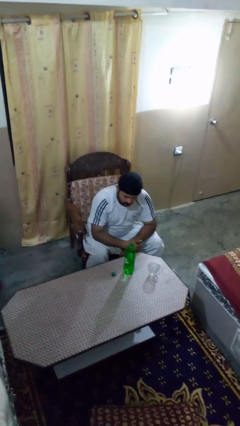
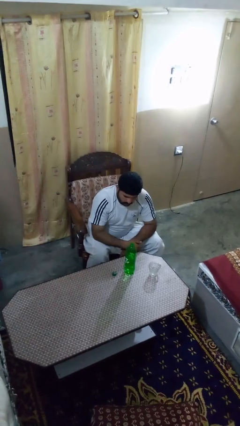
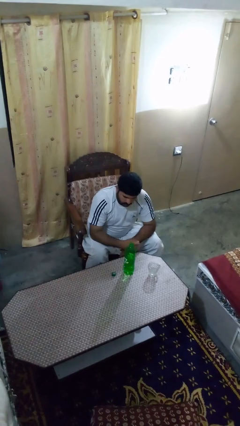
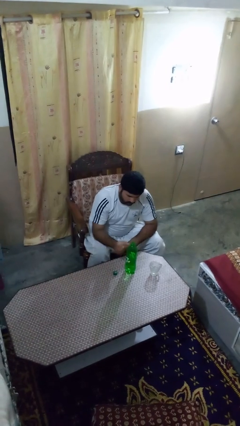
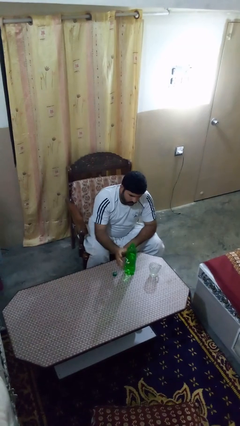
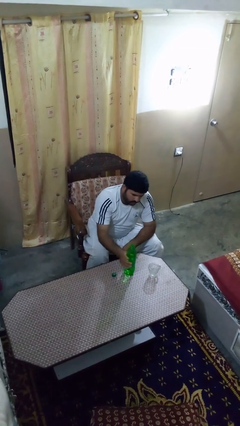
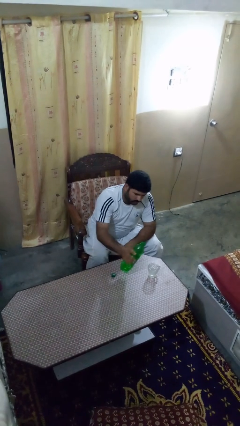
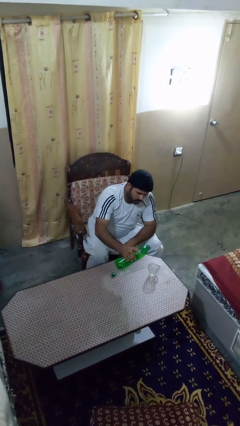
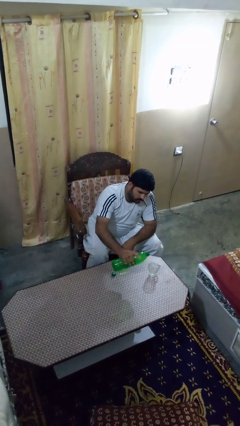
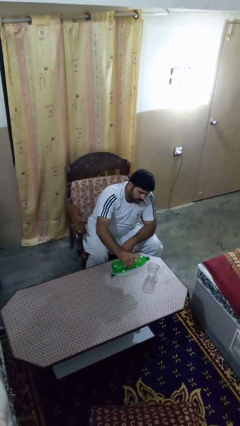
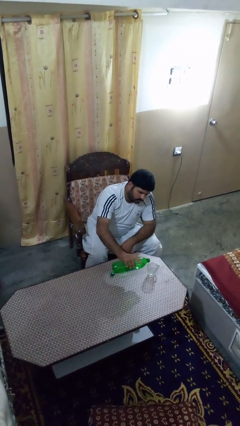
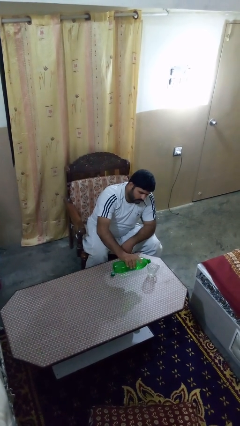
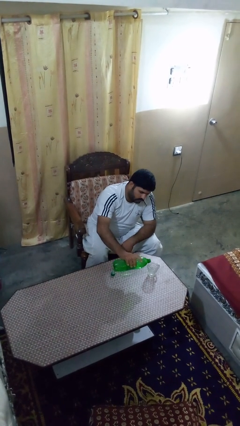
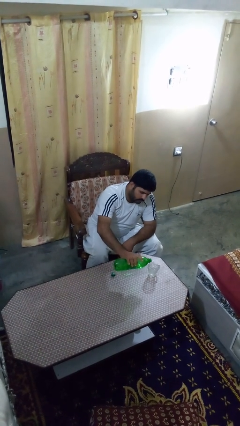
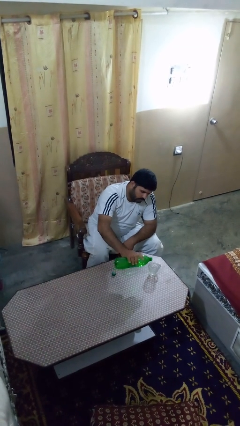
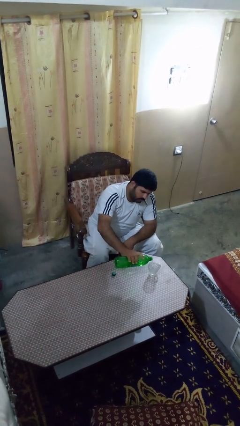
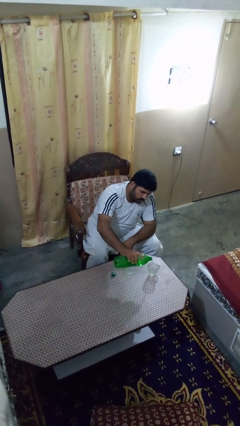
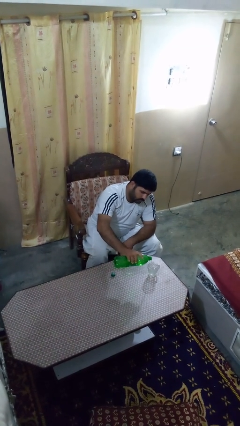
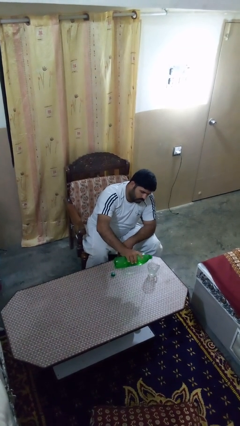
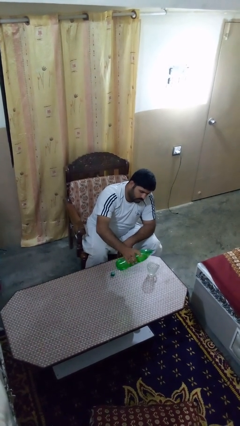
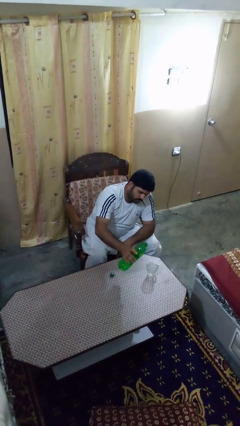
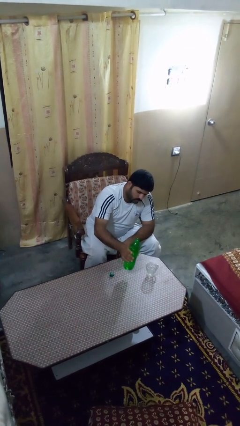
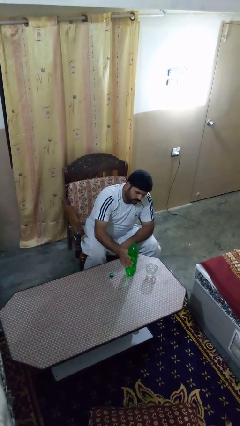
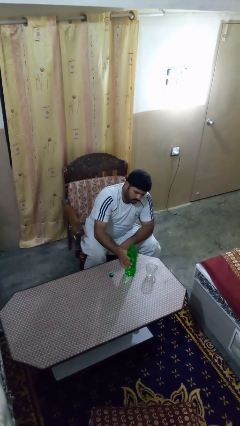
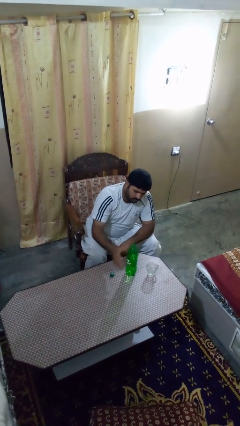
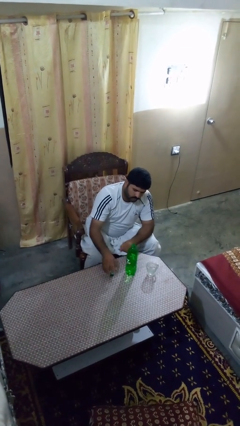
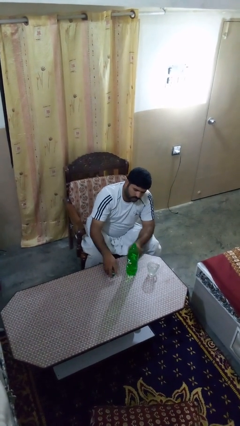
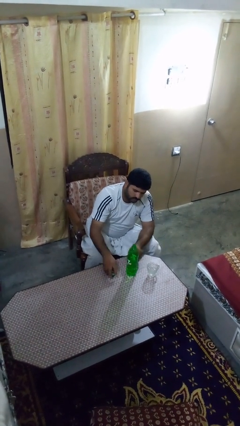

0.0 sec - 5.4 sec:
person pours liquid into cup

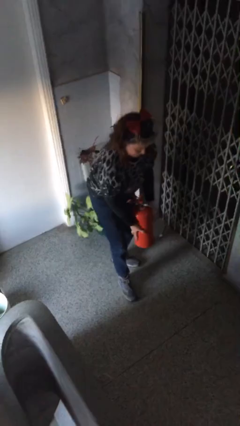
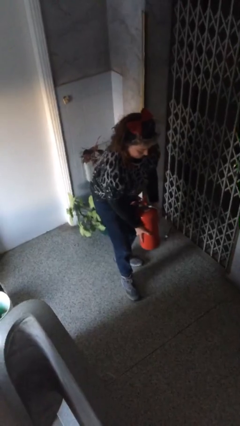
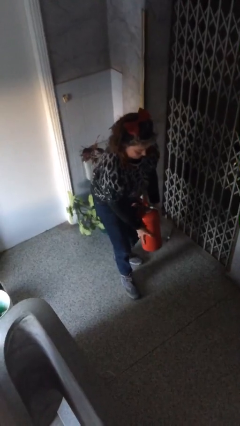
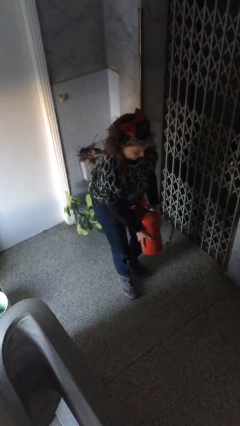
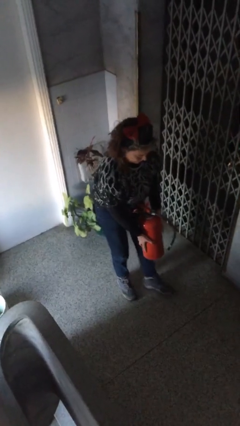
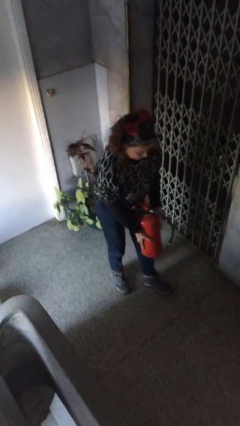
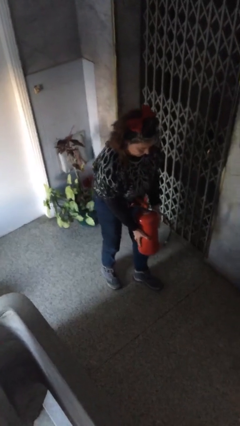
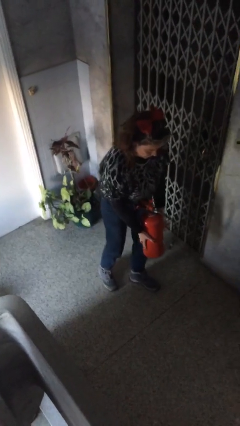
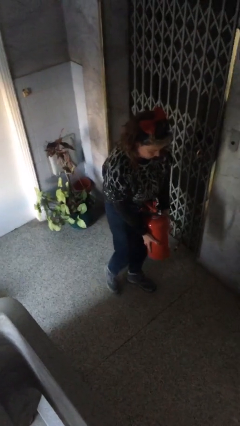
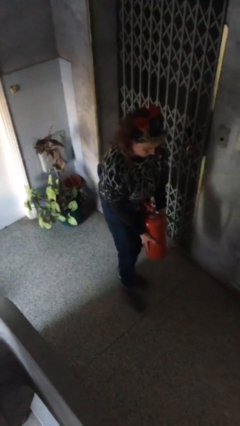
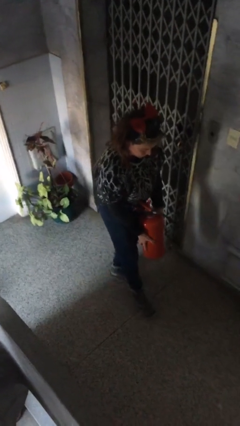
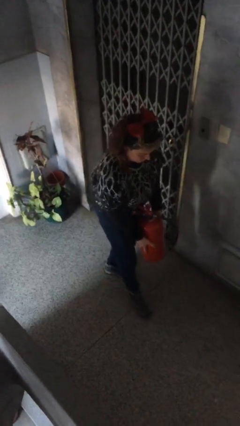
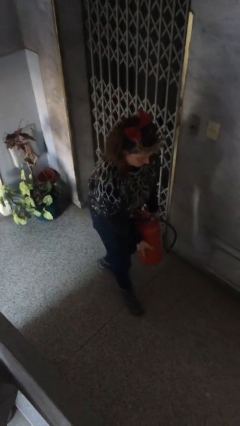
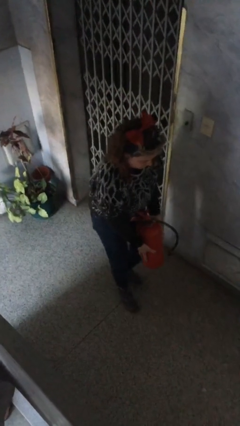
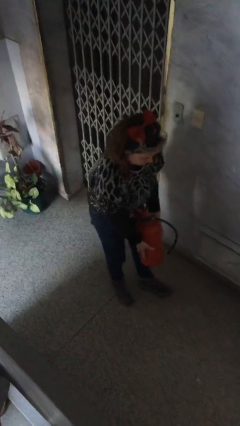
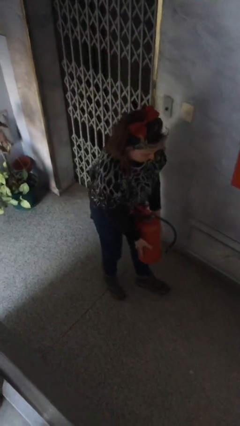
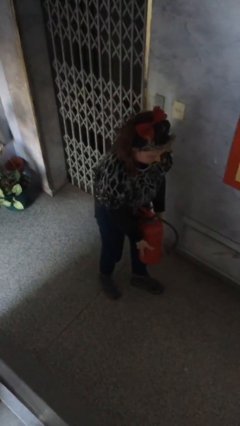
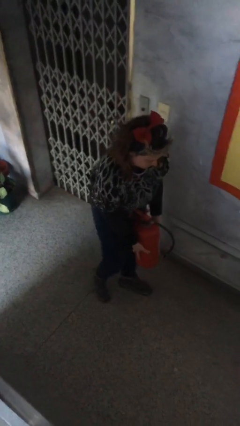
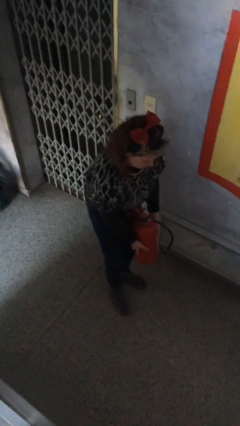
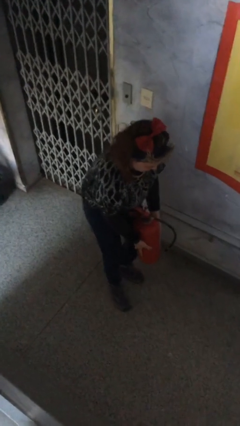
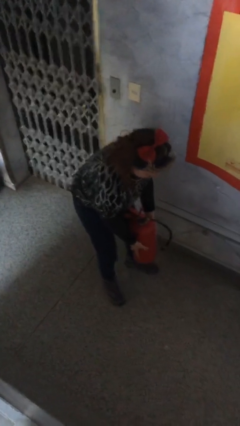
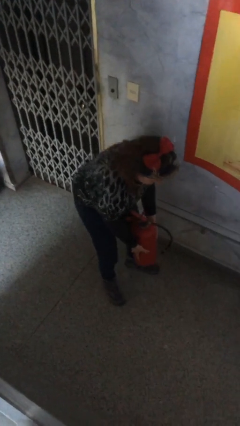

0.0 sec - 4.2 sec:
person carries heavy object

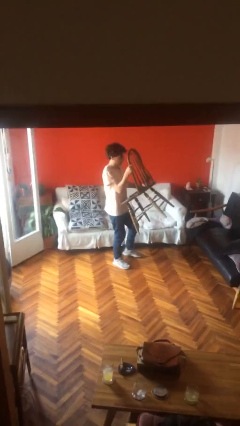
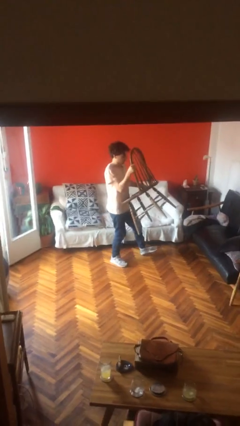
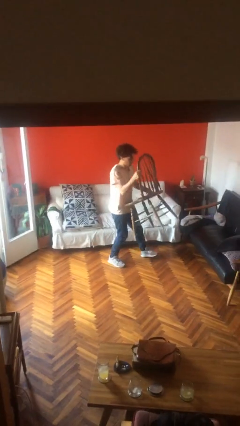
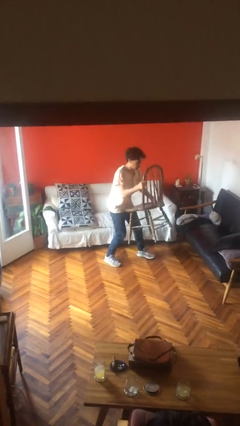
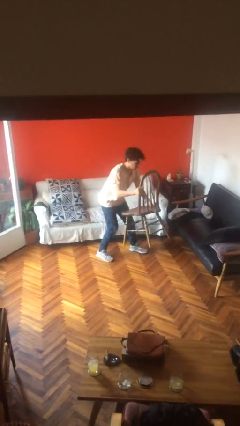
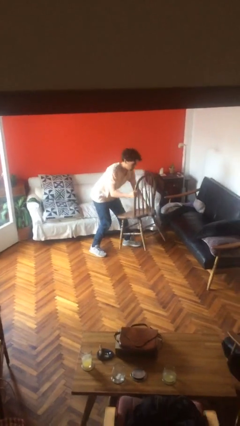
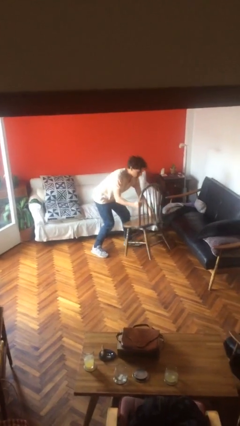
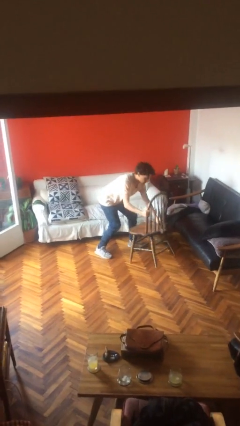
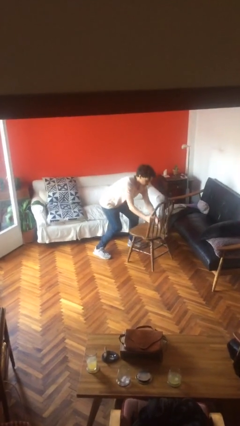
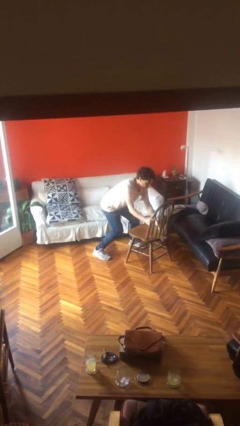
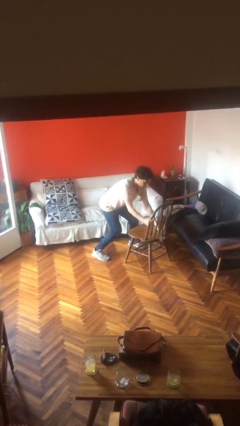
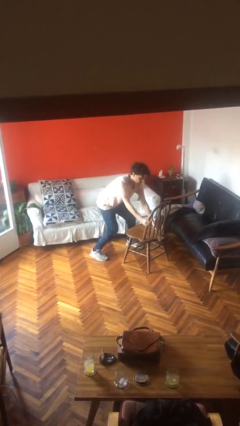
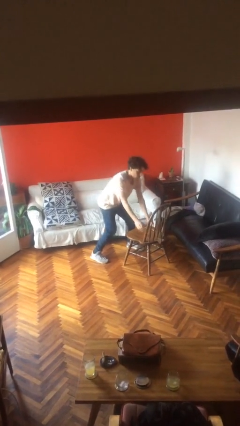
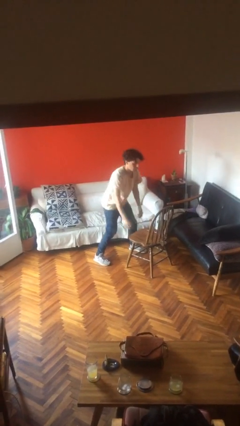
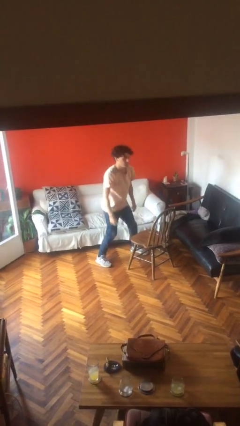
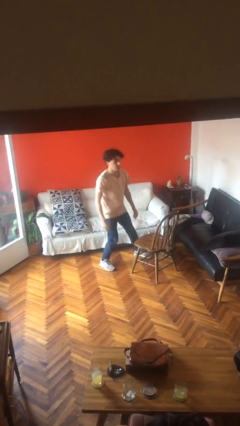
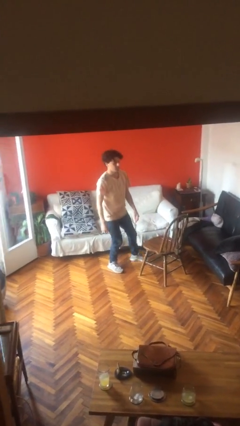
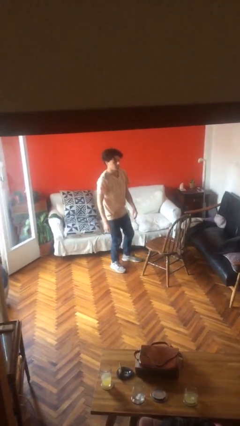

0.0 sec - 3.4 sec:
person puts down object on floor

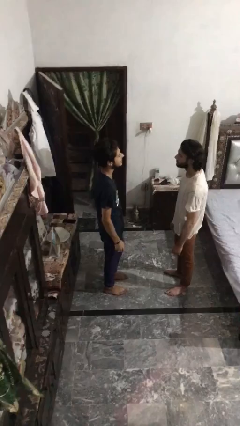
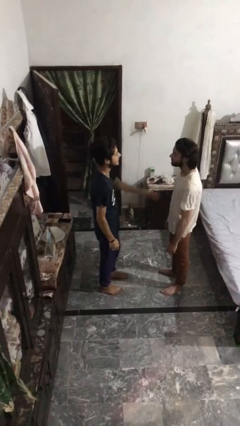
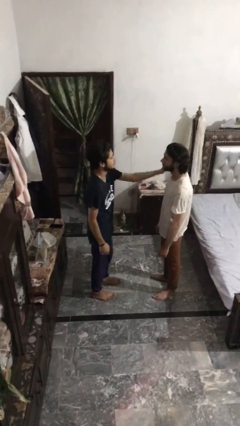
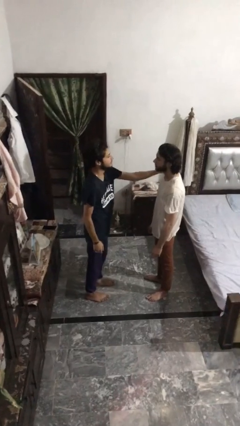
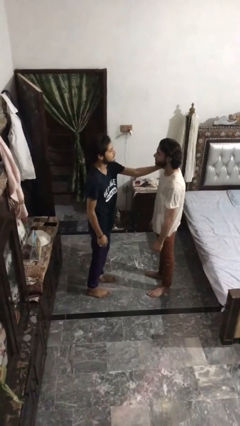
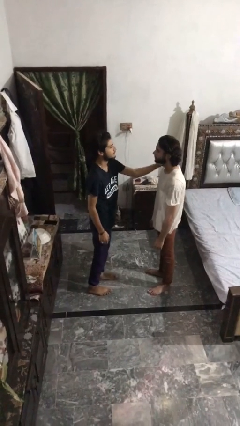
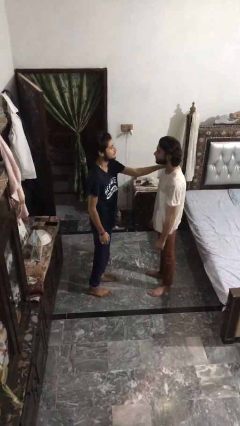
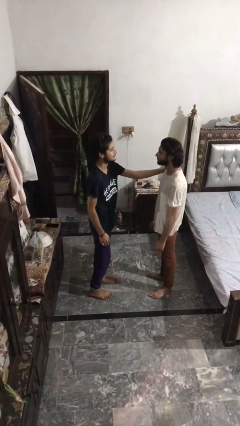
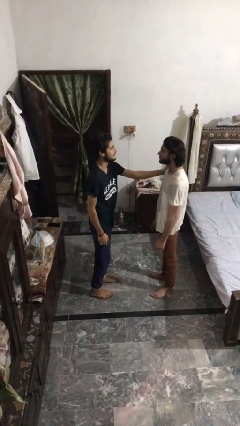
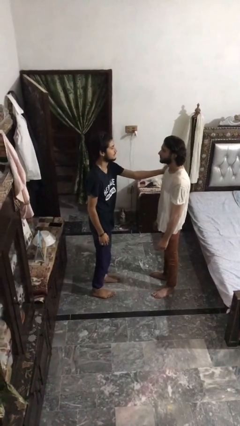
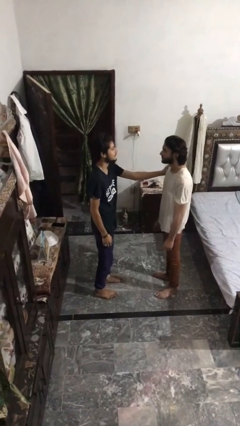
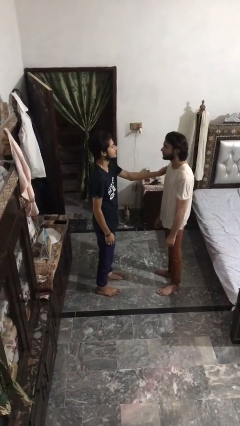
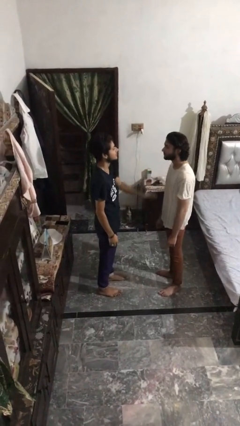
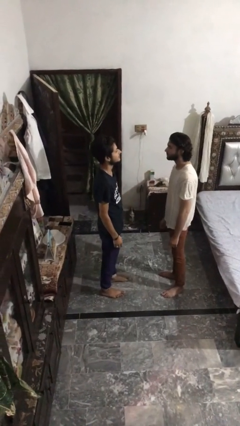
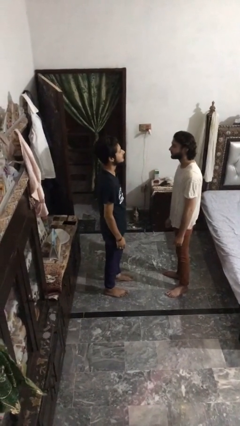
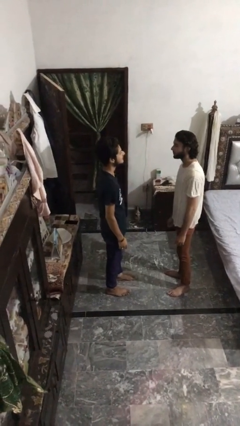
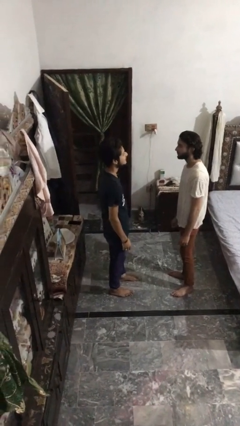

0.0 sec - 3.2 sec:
person pounds shoulders of person

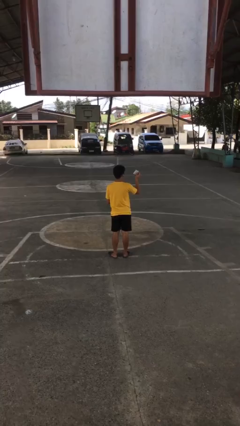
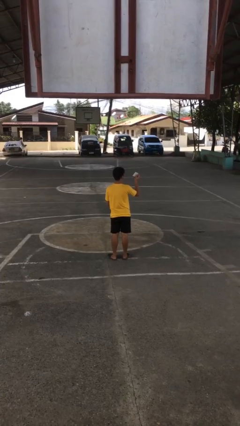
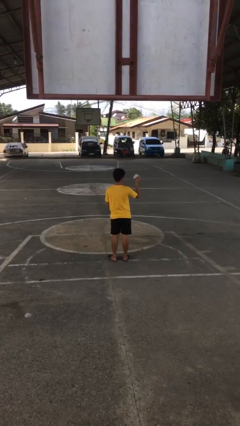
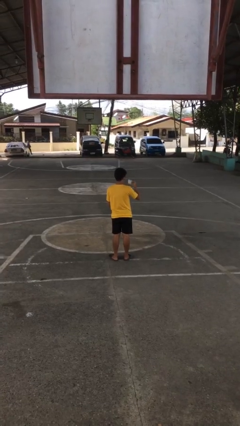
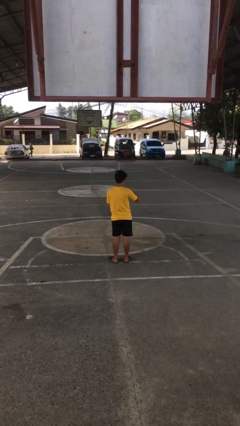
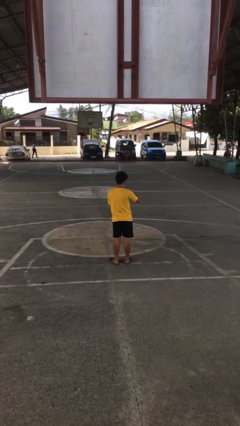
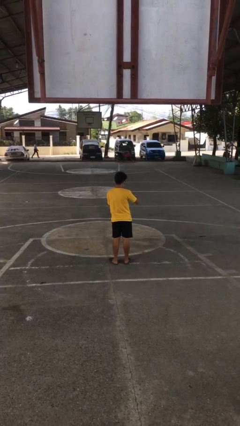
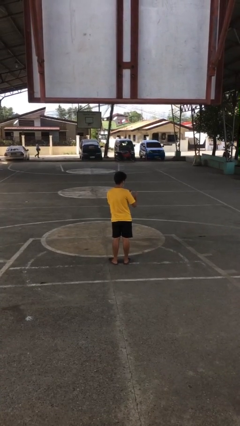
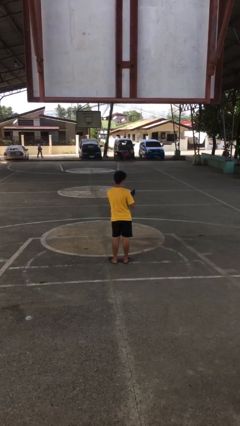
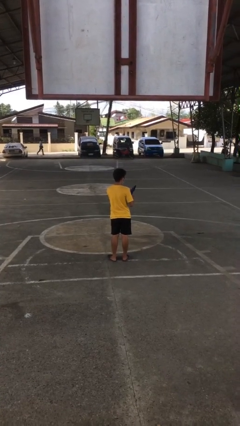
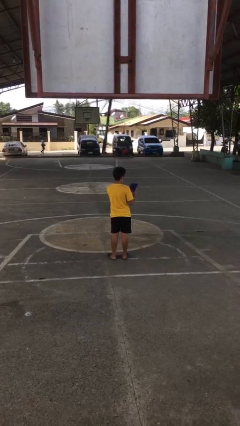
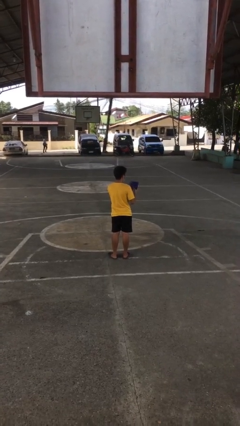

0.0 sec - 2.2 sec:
person puts object into purse
